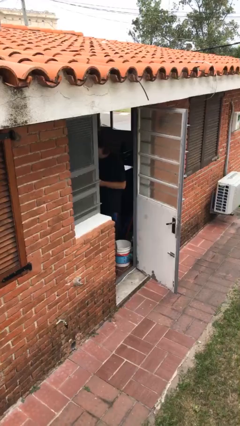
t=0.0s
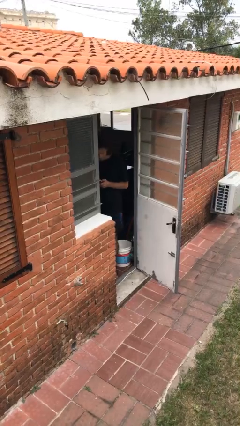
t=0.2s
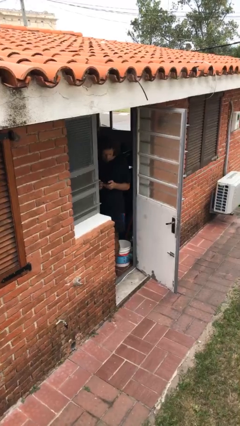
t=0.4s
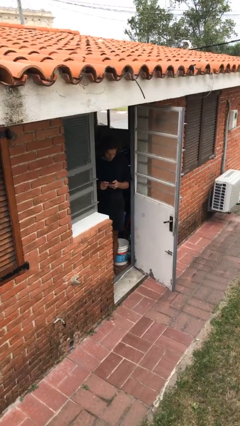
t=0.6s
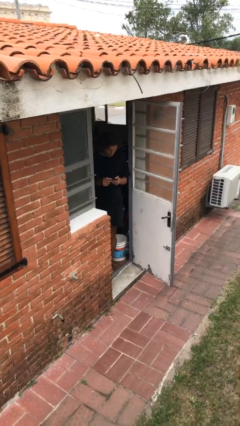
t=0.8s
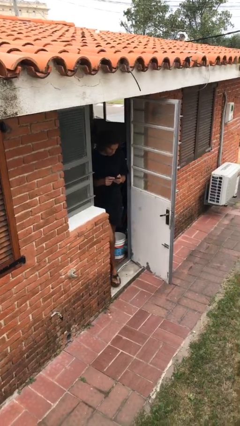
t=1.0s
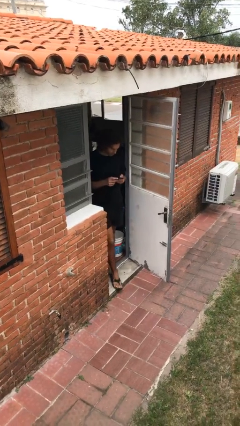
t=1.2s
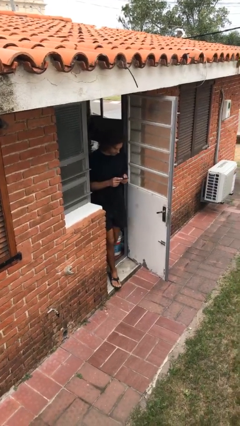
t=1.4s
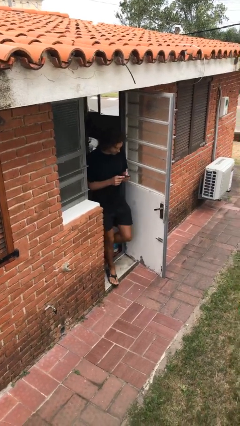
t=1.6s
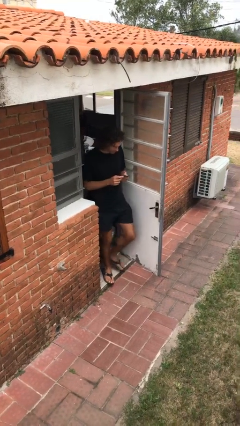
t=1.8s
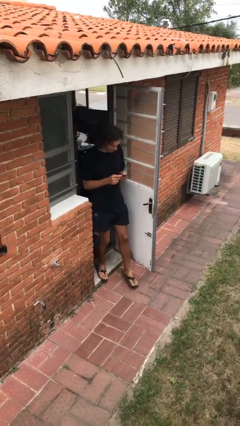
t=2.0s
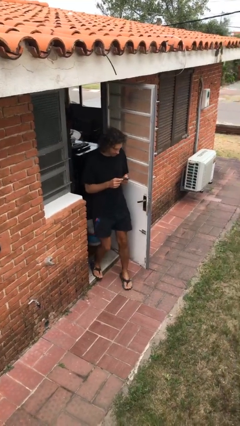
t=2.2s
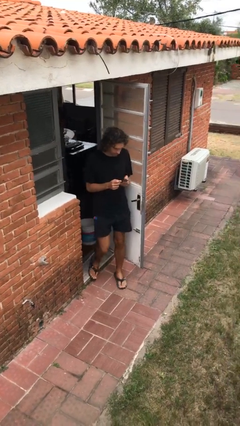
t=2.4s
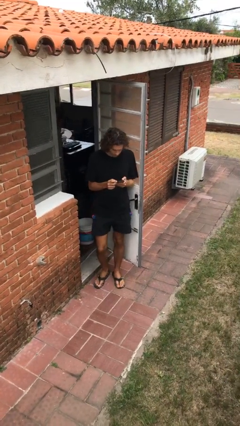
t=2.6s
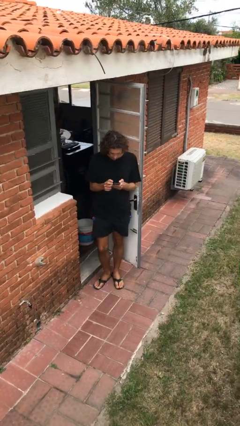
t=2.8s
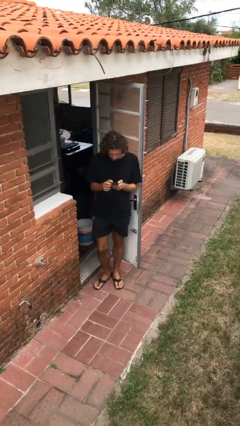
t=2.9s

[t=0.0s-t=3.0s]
person enters scene through structure

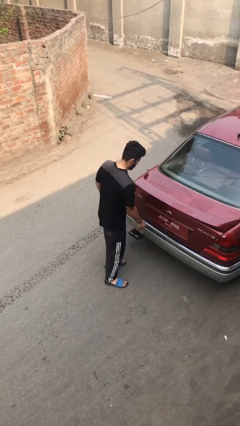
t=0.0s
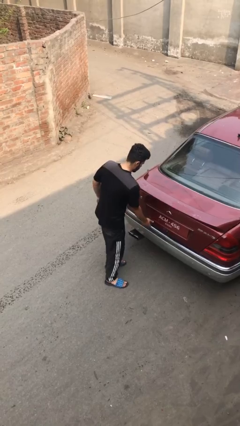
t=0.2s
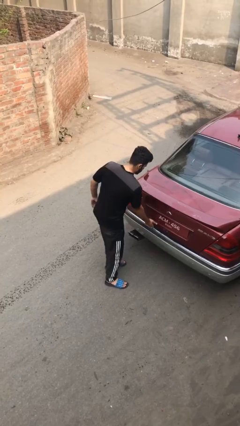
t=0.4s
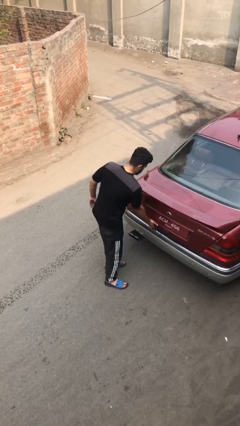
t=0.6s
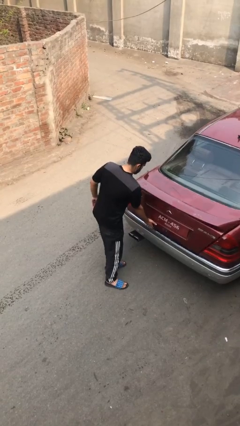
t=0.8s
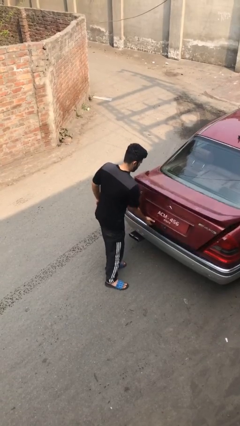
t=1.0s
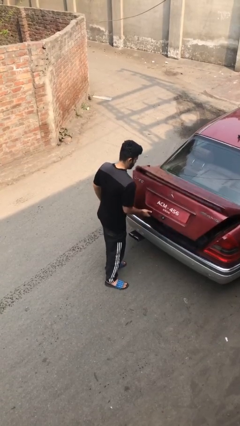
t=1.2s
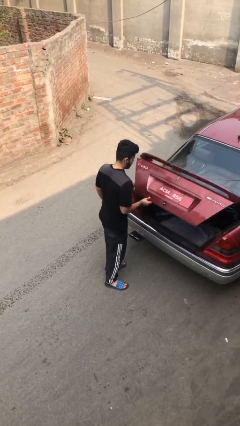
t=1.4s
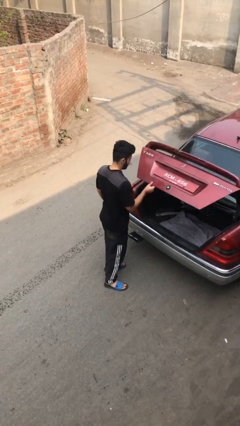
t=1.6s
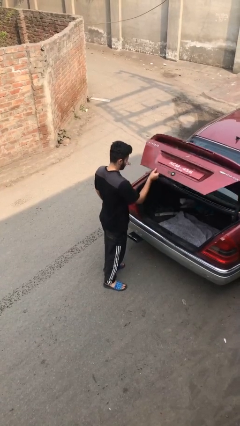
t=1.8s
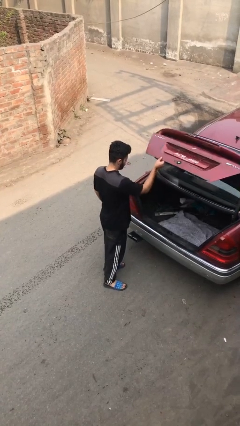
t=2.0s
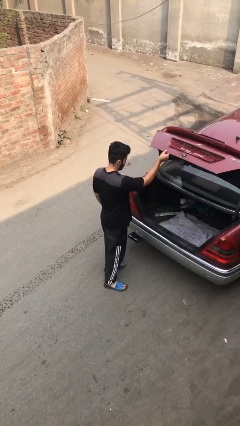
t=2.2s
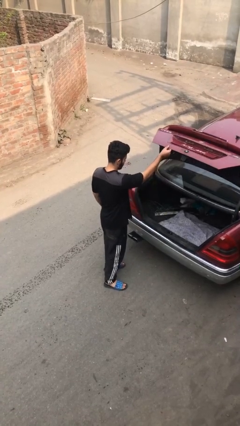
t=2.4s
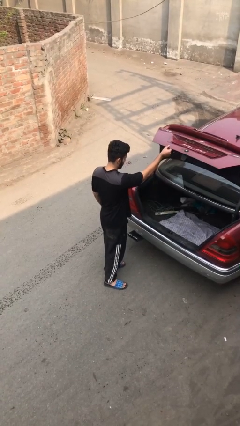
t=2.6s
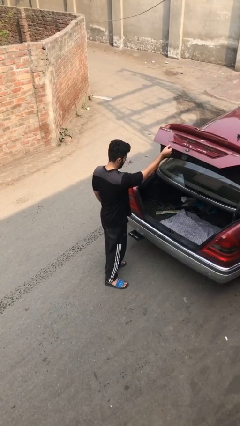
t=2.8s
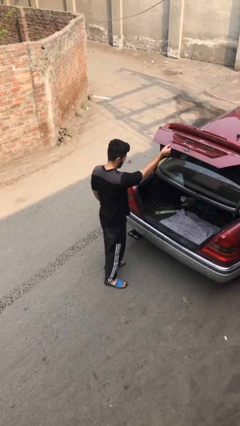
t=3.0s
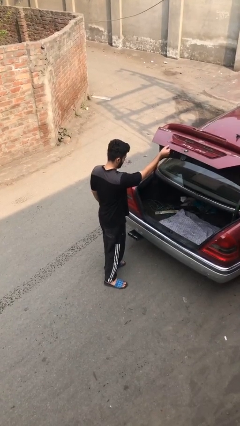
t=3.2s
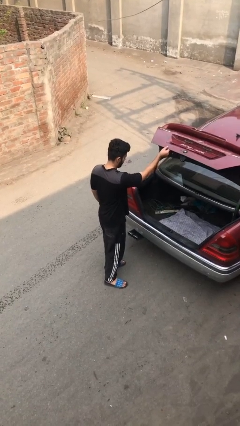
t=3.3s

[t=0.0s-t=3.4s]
person opens car trunk

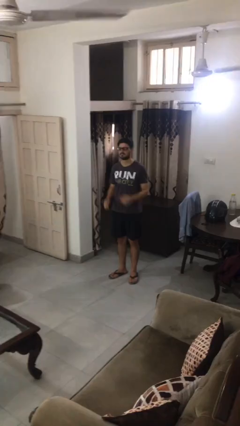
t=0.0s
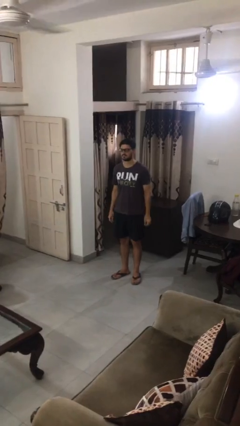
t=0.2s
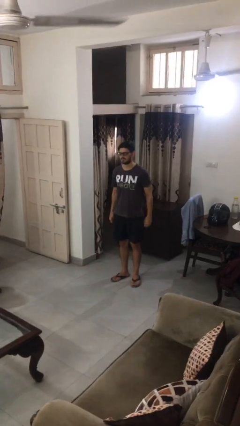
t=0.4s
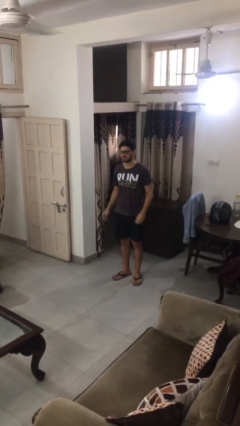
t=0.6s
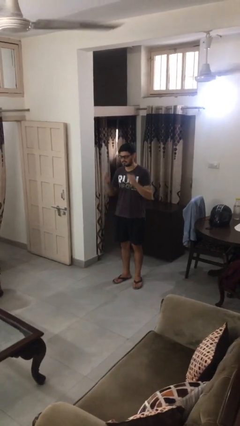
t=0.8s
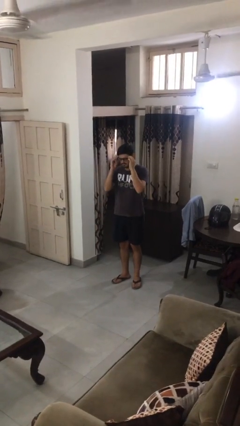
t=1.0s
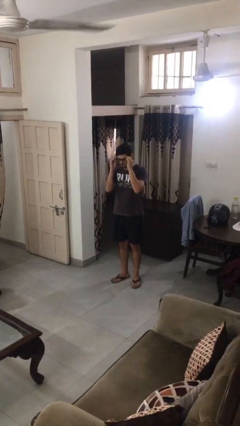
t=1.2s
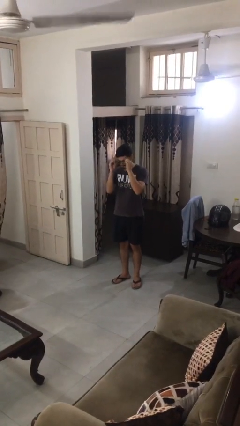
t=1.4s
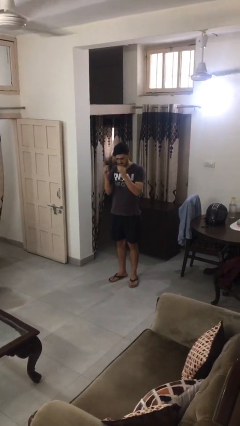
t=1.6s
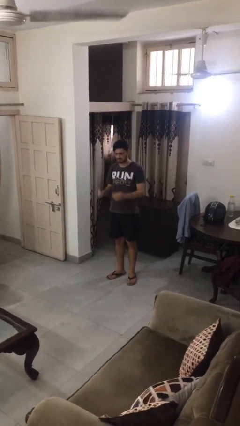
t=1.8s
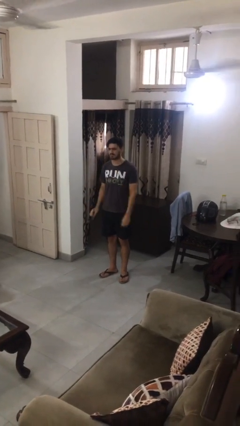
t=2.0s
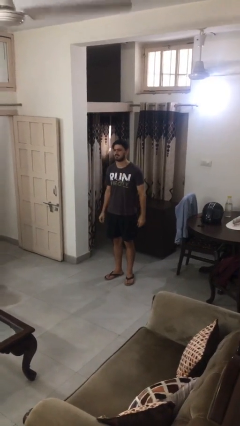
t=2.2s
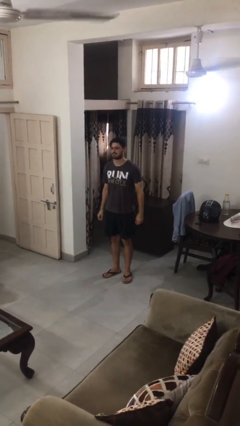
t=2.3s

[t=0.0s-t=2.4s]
person takes off glasses

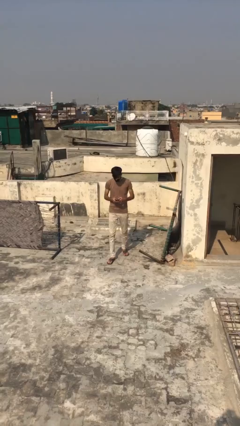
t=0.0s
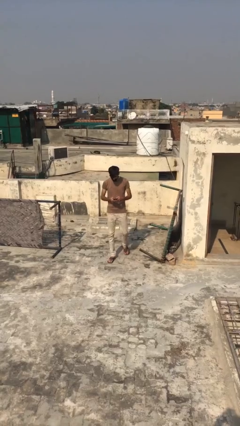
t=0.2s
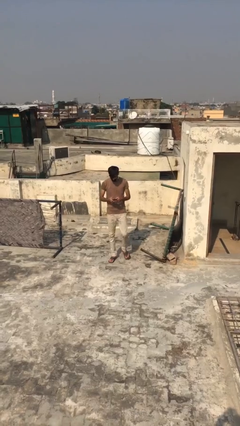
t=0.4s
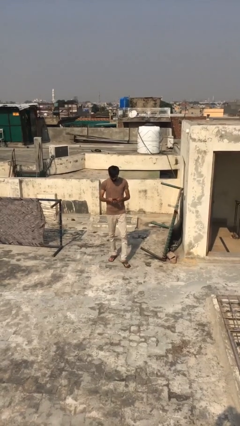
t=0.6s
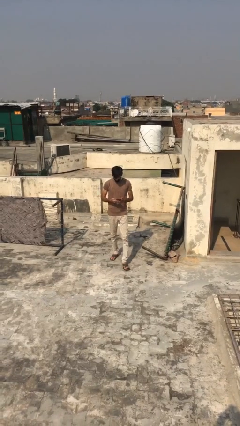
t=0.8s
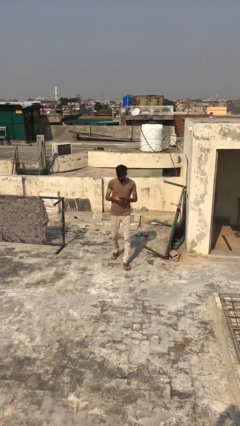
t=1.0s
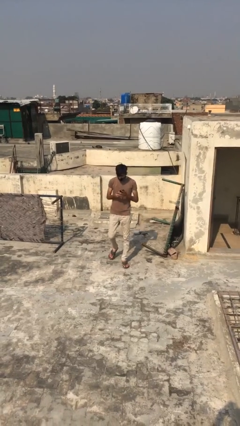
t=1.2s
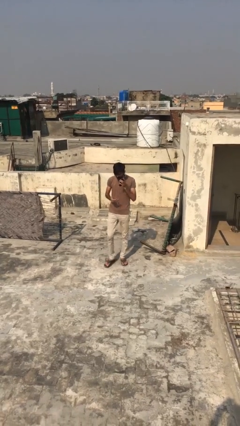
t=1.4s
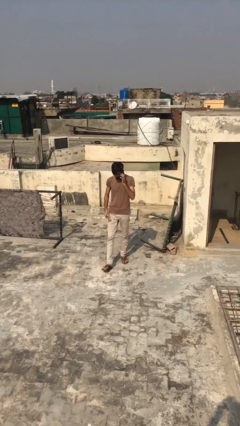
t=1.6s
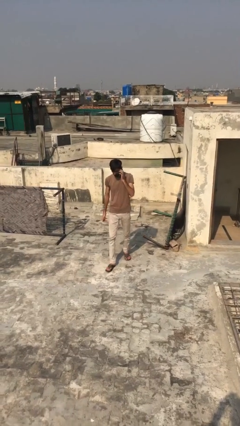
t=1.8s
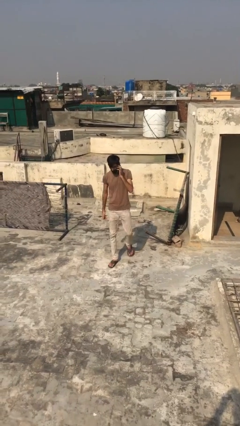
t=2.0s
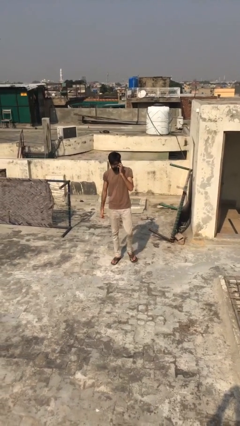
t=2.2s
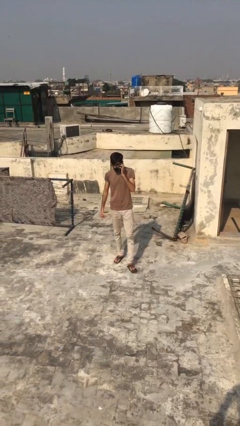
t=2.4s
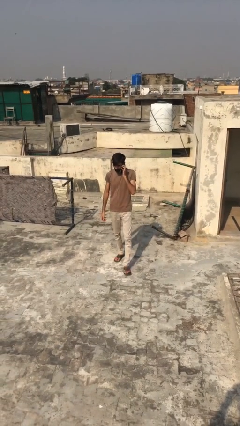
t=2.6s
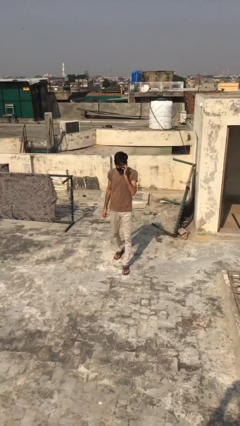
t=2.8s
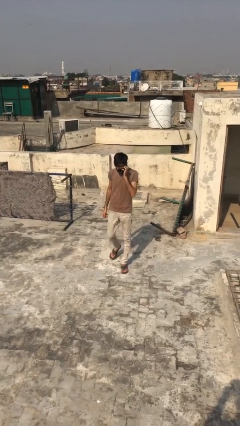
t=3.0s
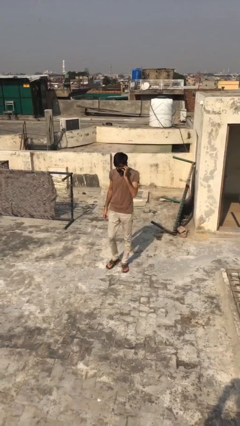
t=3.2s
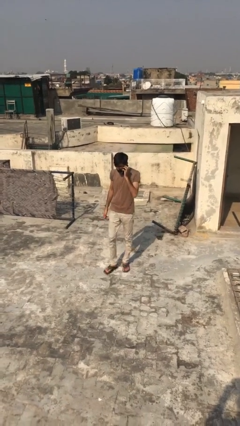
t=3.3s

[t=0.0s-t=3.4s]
person talks on phone

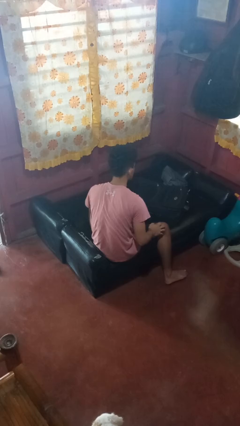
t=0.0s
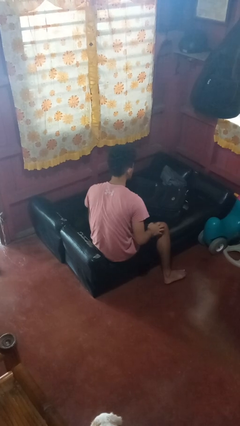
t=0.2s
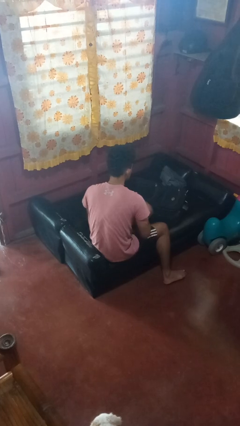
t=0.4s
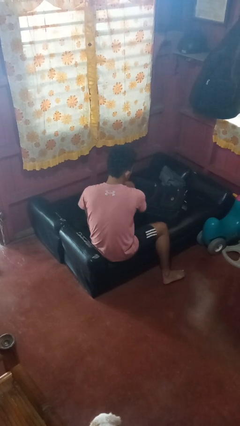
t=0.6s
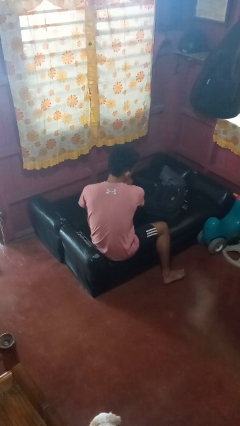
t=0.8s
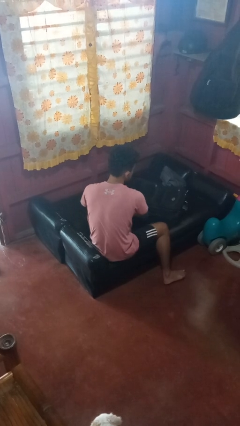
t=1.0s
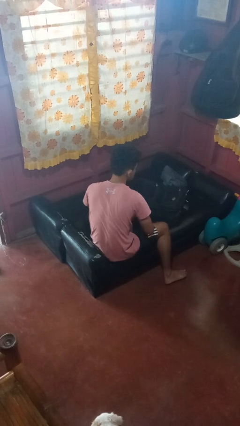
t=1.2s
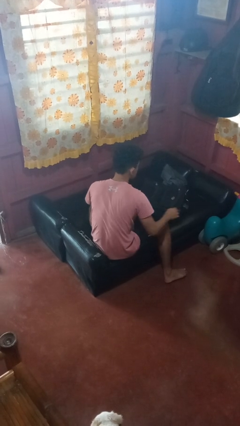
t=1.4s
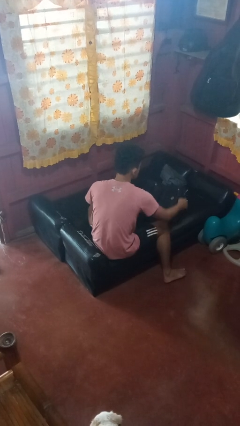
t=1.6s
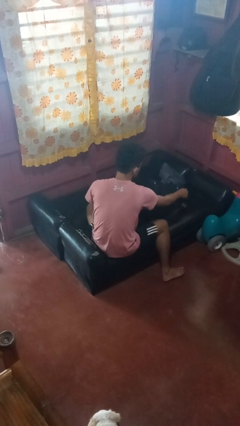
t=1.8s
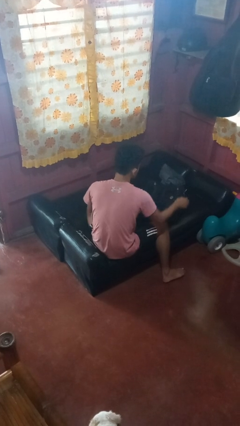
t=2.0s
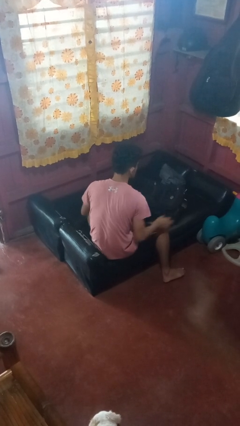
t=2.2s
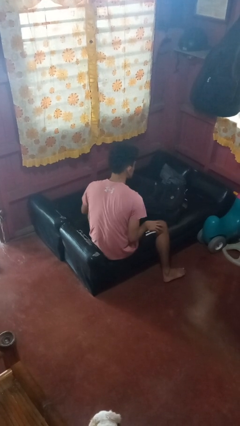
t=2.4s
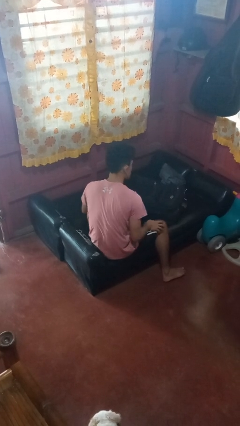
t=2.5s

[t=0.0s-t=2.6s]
person closes suitcase

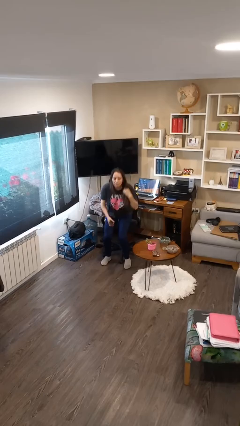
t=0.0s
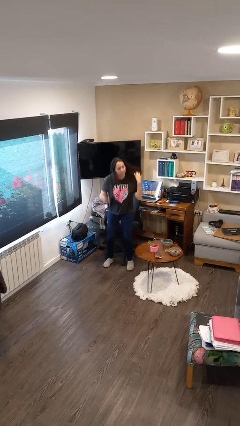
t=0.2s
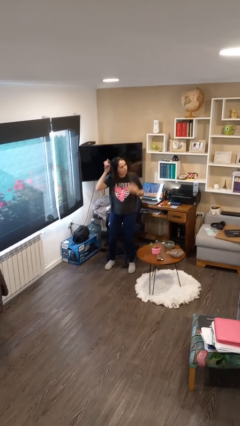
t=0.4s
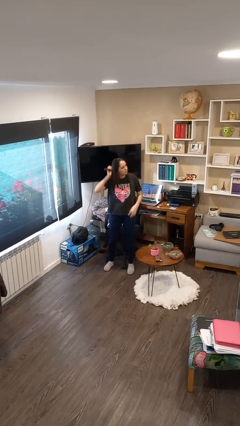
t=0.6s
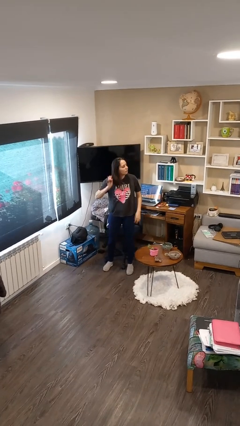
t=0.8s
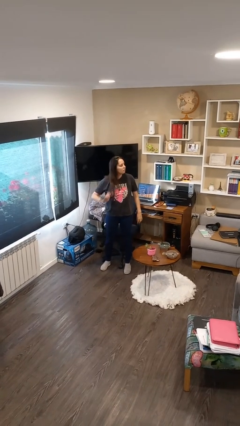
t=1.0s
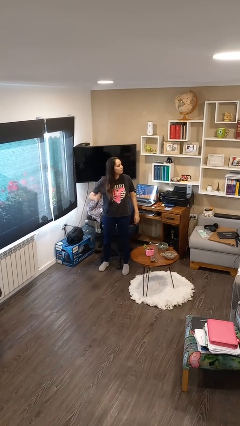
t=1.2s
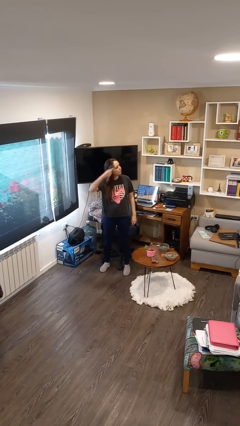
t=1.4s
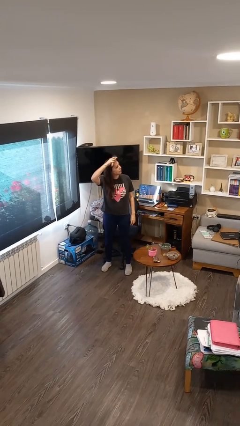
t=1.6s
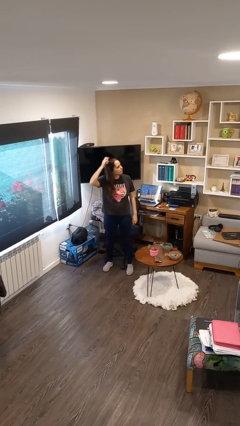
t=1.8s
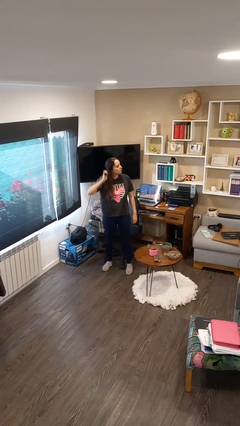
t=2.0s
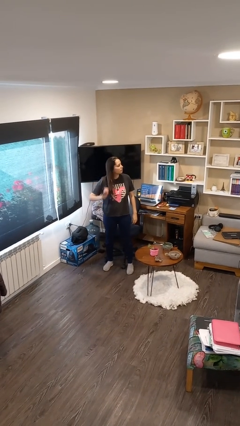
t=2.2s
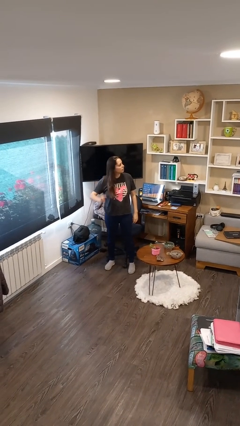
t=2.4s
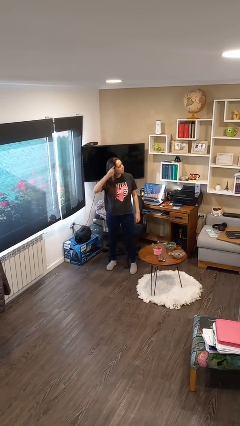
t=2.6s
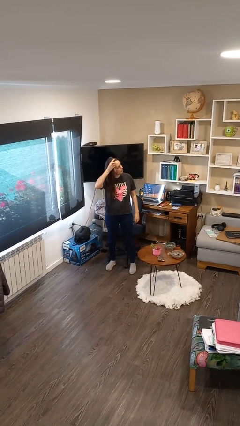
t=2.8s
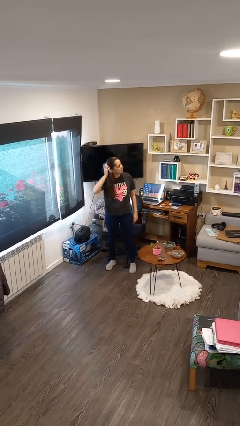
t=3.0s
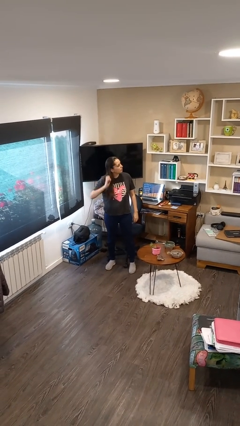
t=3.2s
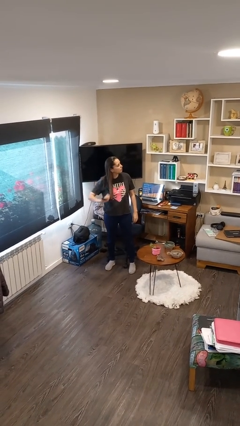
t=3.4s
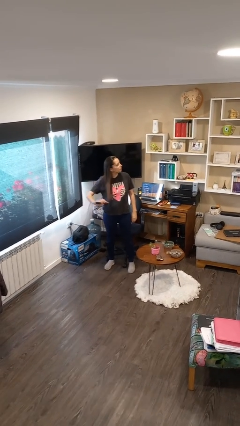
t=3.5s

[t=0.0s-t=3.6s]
person brushes hair
